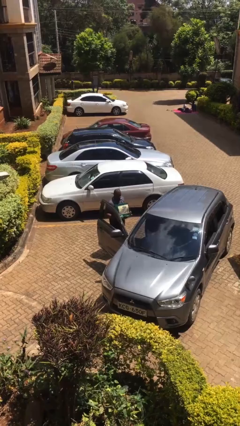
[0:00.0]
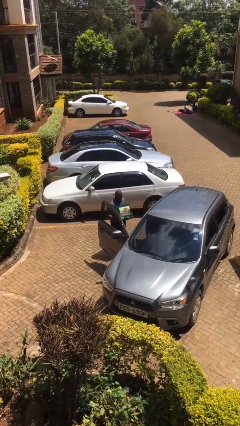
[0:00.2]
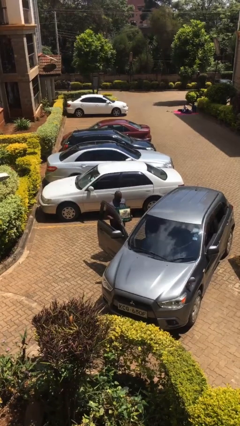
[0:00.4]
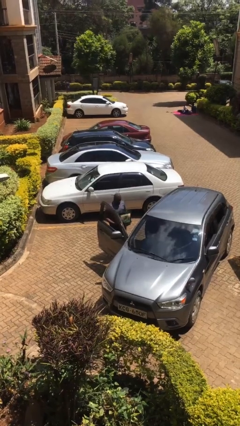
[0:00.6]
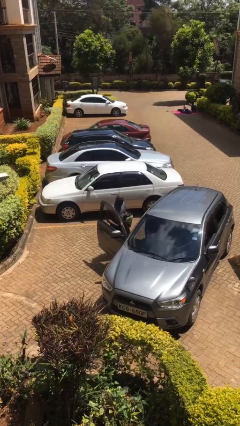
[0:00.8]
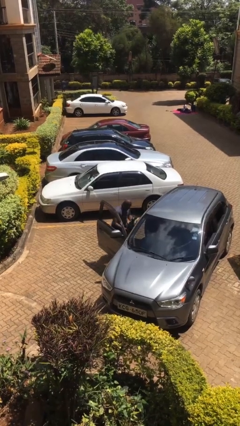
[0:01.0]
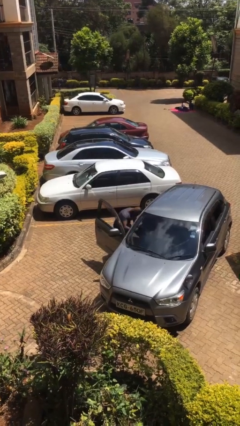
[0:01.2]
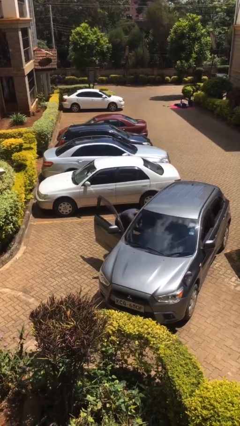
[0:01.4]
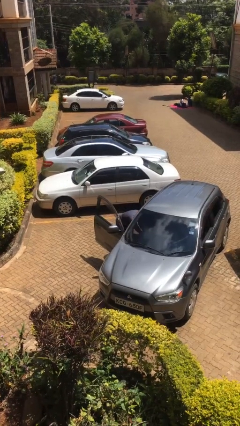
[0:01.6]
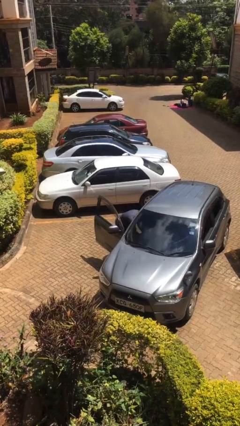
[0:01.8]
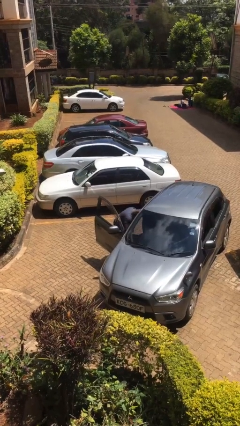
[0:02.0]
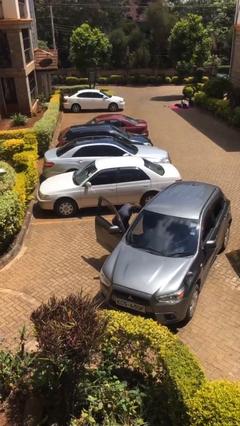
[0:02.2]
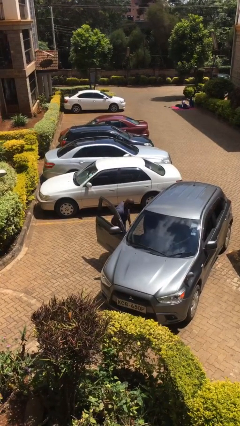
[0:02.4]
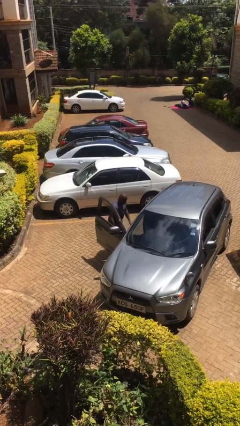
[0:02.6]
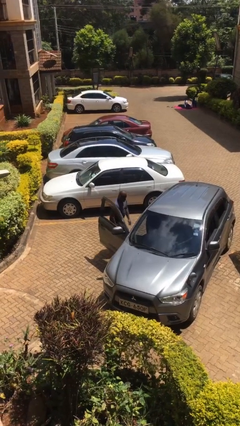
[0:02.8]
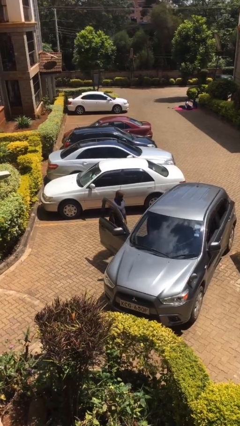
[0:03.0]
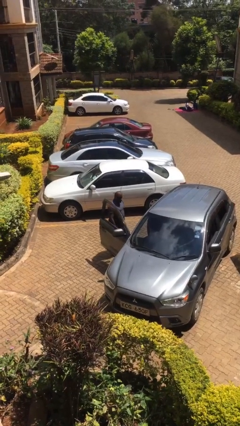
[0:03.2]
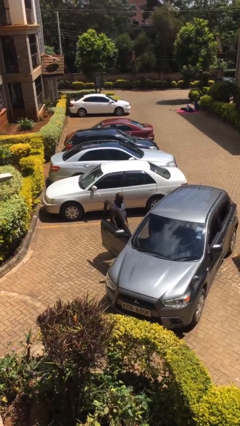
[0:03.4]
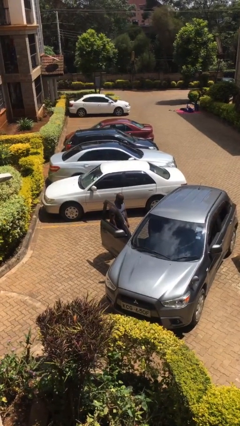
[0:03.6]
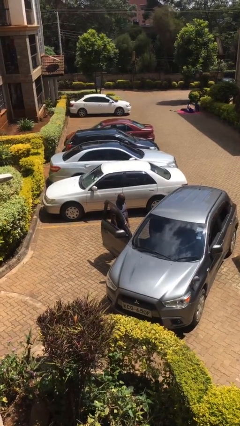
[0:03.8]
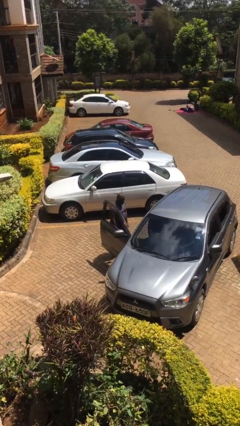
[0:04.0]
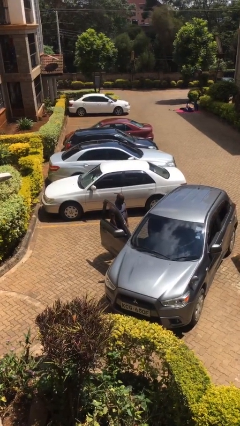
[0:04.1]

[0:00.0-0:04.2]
person loads car

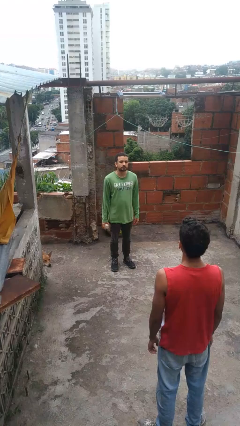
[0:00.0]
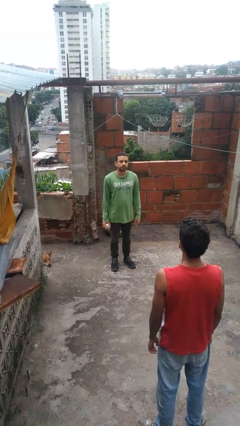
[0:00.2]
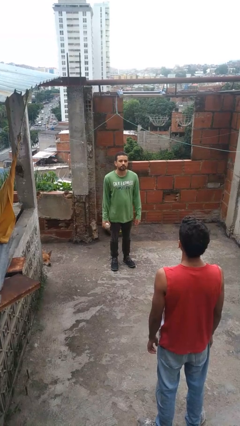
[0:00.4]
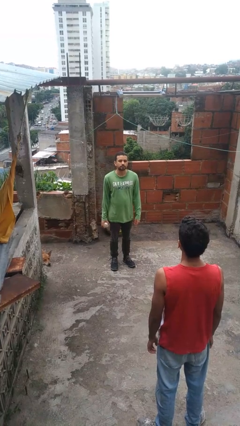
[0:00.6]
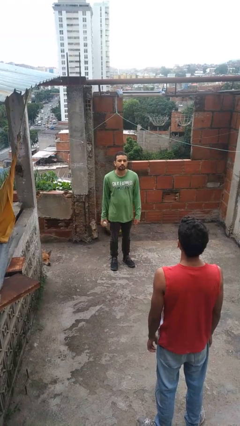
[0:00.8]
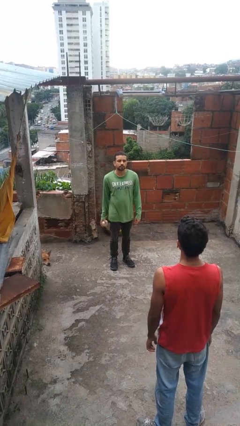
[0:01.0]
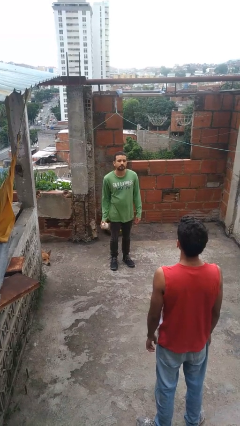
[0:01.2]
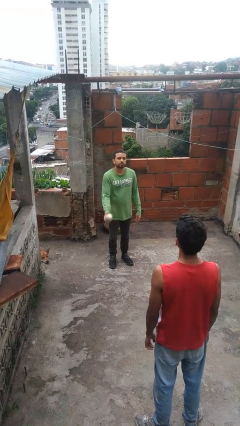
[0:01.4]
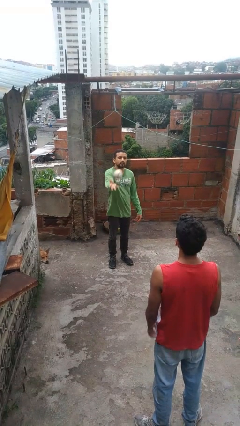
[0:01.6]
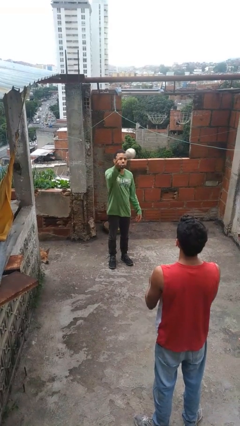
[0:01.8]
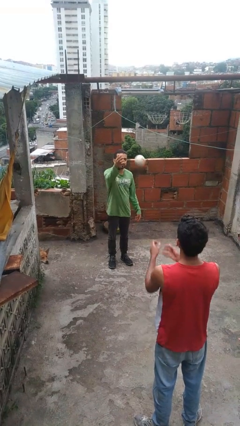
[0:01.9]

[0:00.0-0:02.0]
person throws object to person

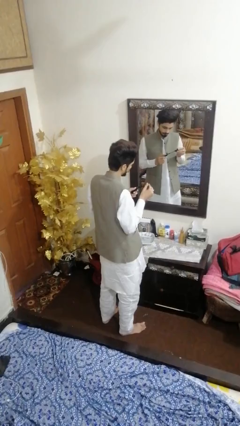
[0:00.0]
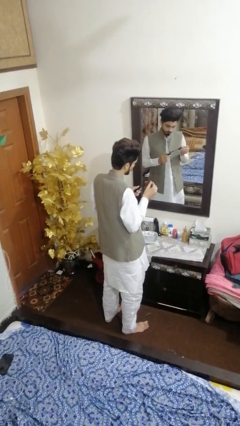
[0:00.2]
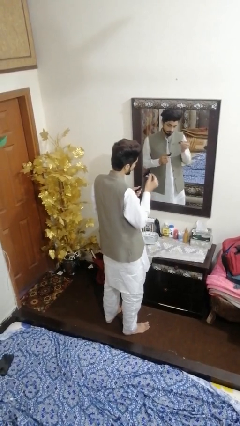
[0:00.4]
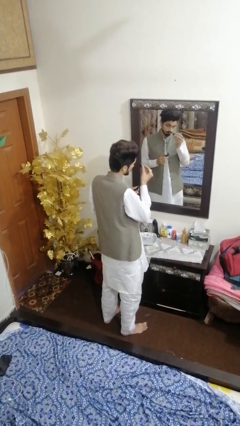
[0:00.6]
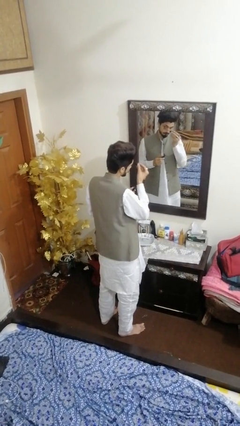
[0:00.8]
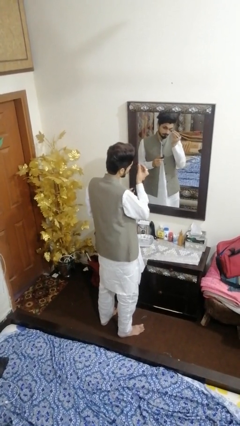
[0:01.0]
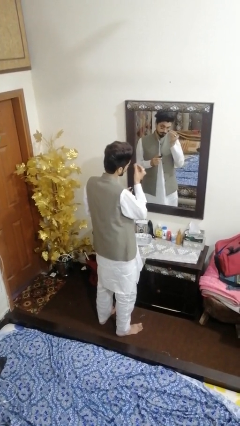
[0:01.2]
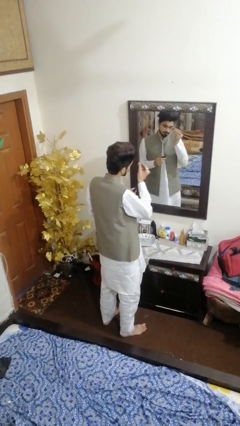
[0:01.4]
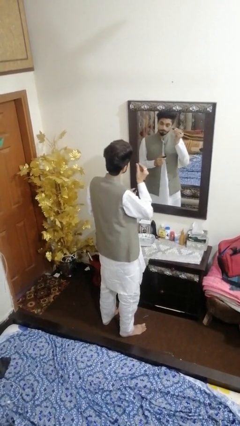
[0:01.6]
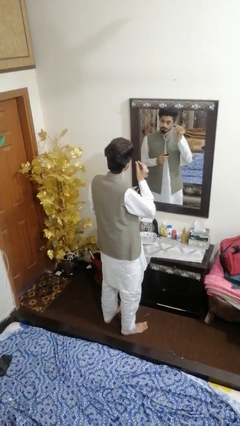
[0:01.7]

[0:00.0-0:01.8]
person applies eye makeup

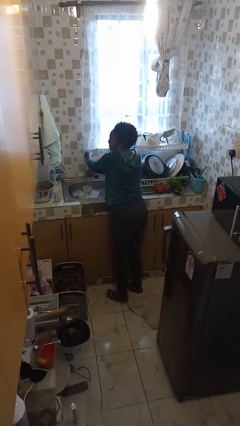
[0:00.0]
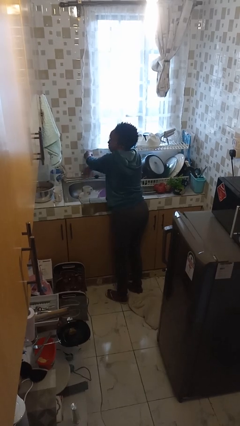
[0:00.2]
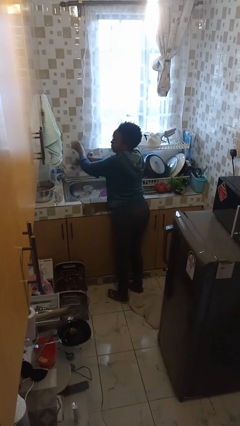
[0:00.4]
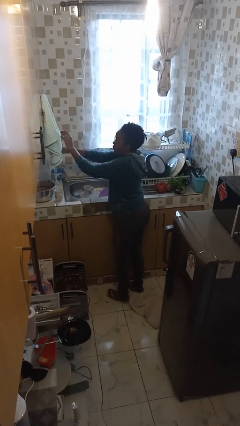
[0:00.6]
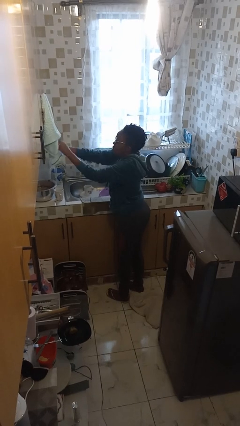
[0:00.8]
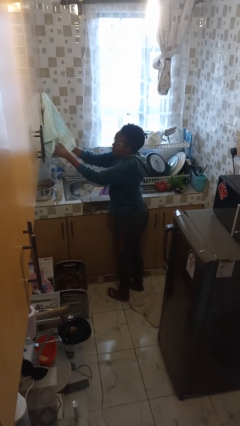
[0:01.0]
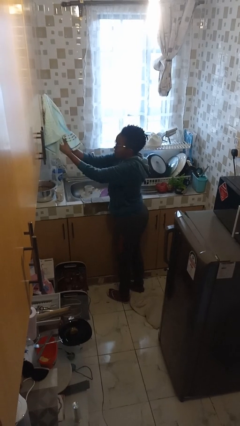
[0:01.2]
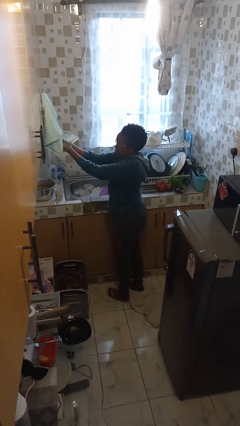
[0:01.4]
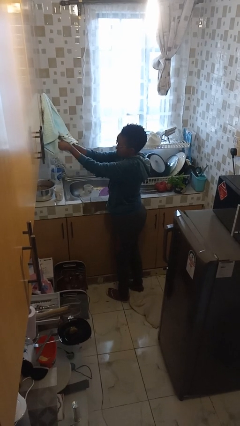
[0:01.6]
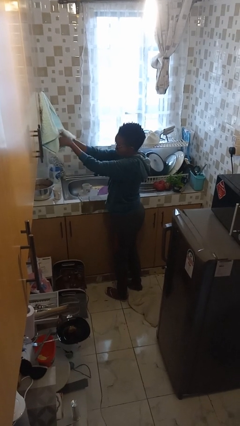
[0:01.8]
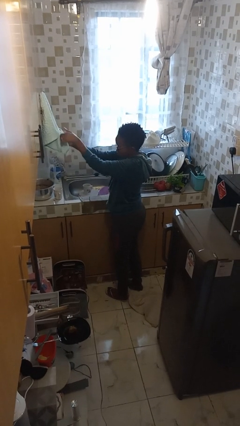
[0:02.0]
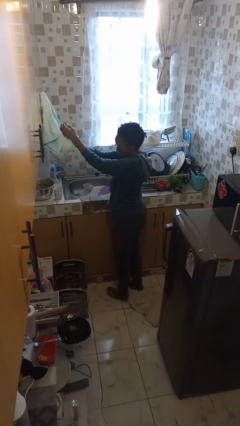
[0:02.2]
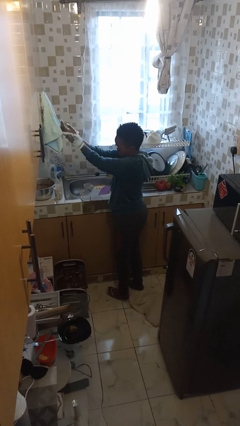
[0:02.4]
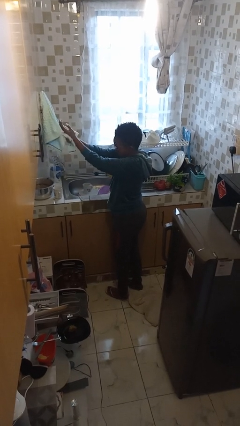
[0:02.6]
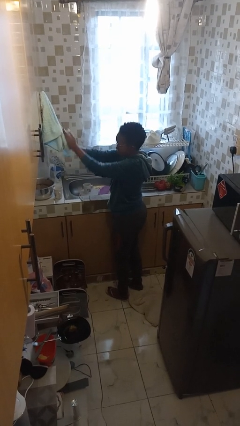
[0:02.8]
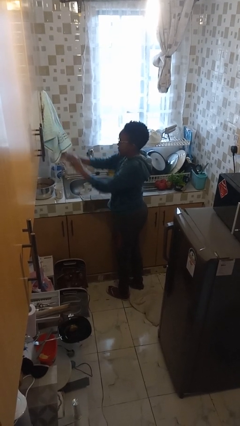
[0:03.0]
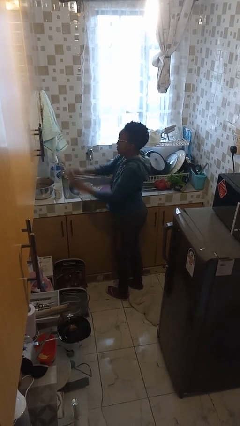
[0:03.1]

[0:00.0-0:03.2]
person dries hands with towel

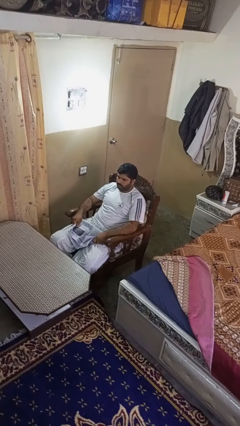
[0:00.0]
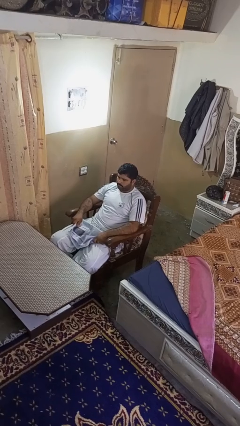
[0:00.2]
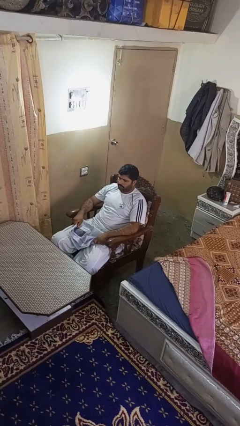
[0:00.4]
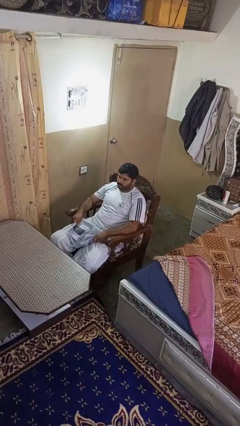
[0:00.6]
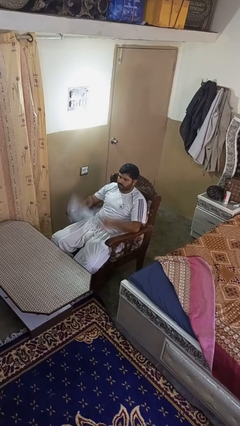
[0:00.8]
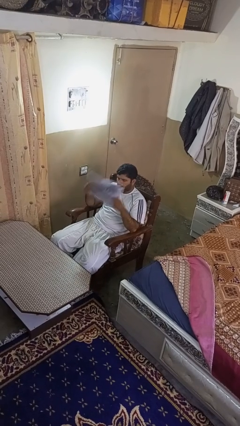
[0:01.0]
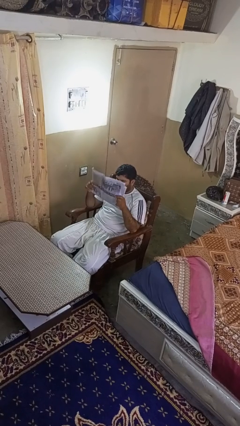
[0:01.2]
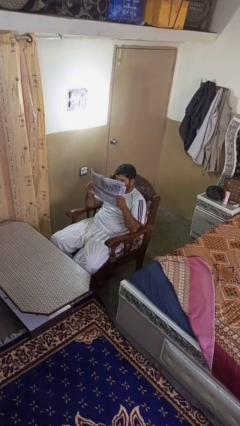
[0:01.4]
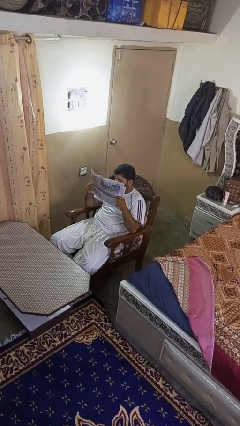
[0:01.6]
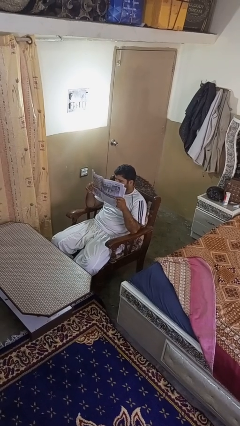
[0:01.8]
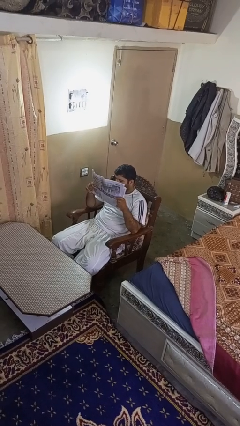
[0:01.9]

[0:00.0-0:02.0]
person reads newspaper

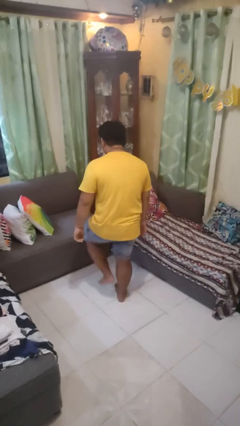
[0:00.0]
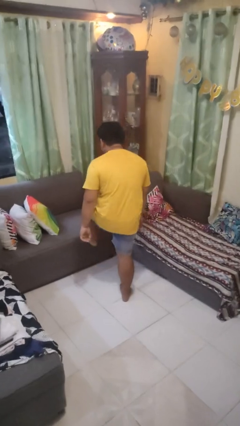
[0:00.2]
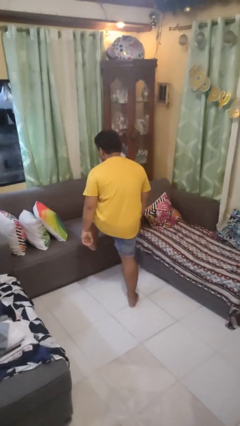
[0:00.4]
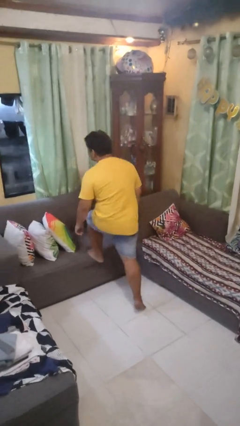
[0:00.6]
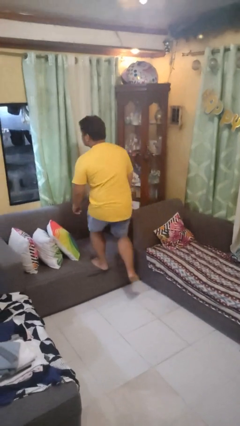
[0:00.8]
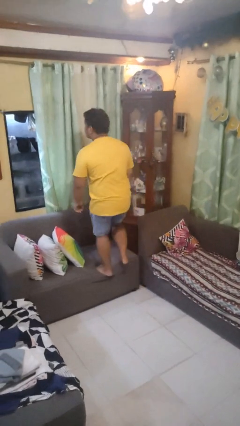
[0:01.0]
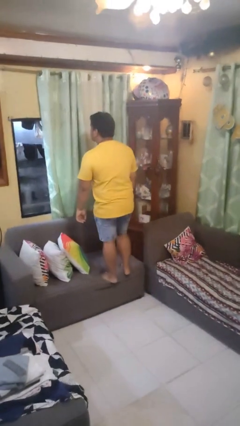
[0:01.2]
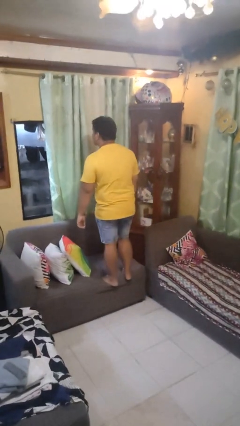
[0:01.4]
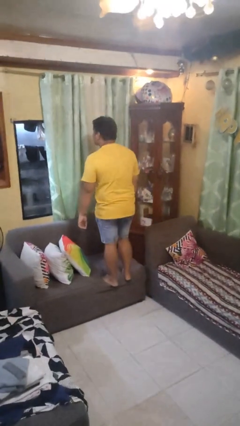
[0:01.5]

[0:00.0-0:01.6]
person climbs on couch

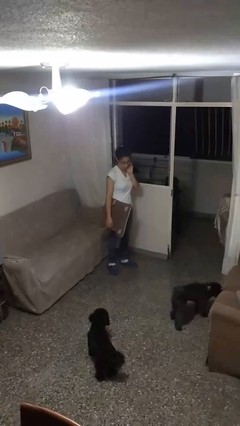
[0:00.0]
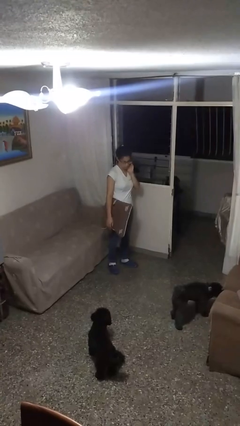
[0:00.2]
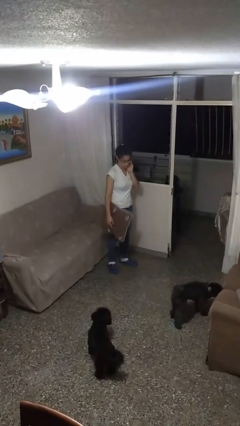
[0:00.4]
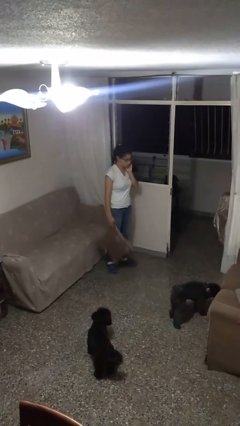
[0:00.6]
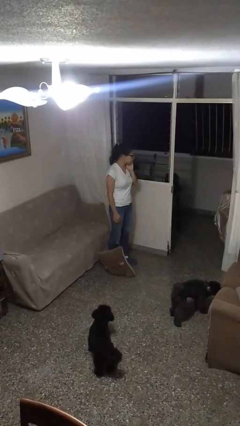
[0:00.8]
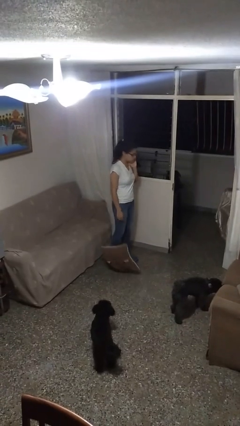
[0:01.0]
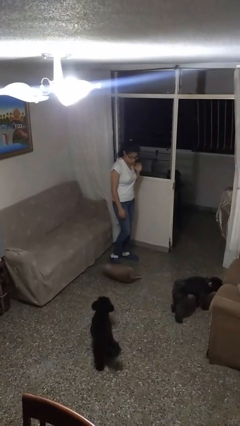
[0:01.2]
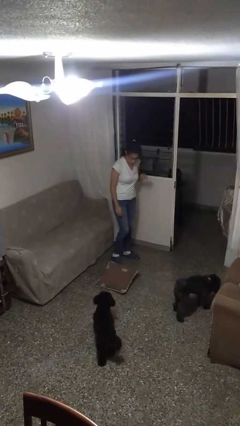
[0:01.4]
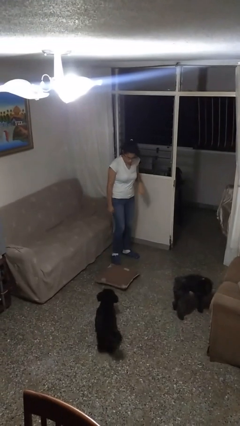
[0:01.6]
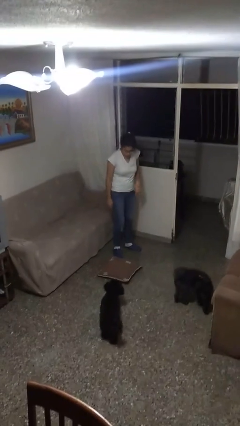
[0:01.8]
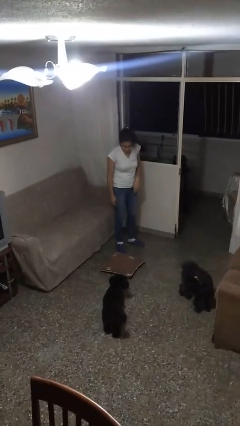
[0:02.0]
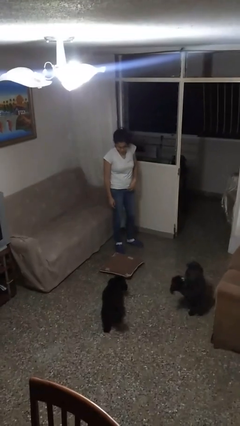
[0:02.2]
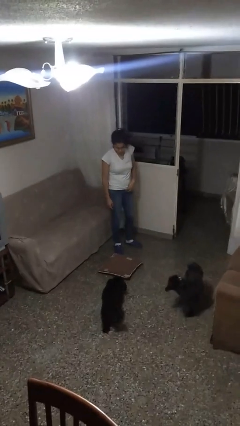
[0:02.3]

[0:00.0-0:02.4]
person drops object
